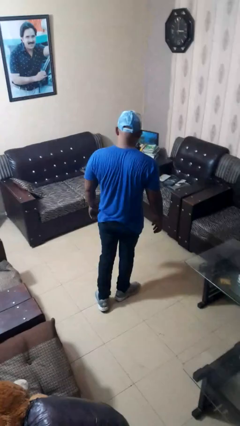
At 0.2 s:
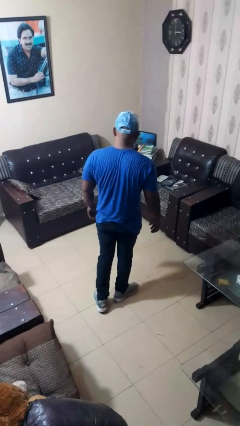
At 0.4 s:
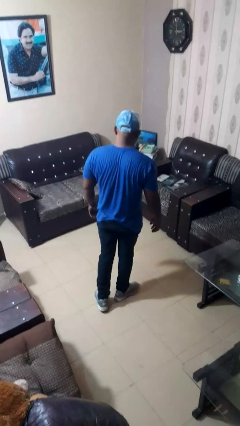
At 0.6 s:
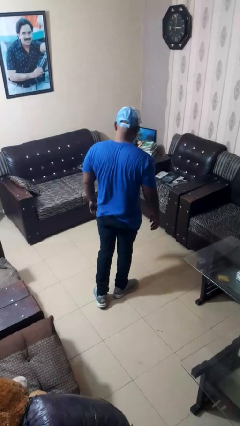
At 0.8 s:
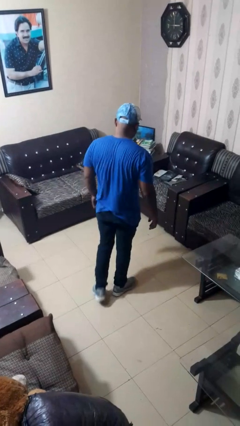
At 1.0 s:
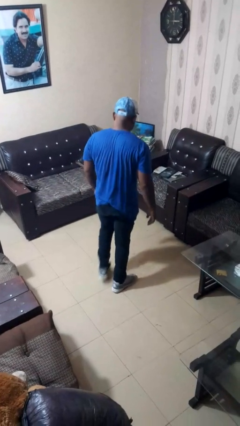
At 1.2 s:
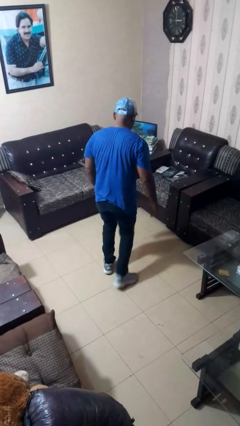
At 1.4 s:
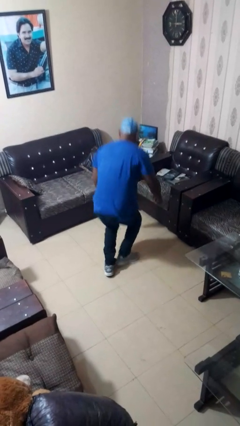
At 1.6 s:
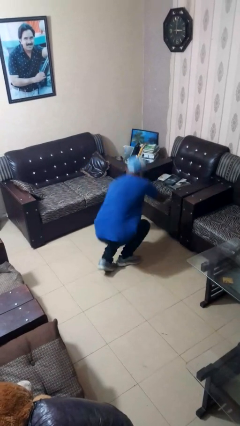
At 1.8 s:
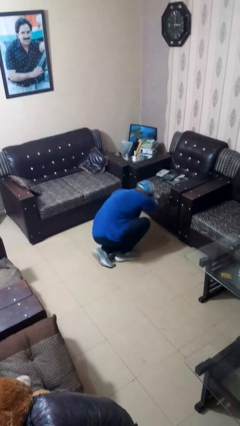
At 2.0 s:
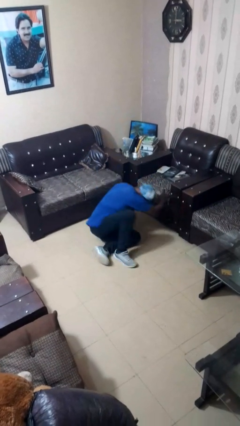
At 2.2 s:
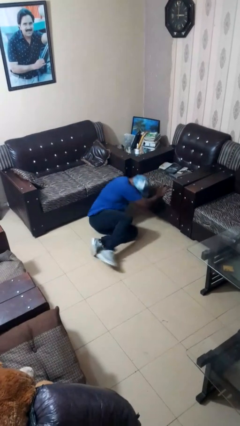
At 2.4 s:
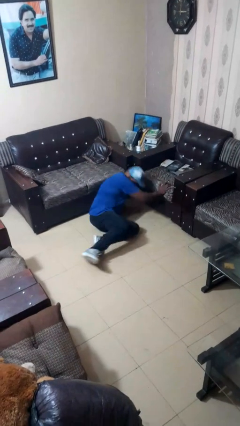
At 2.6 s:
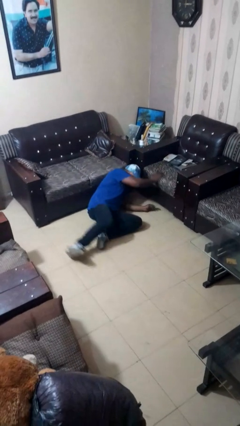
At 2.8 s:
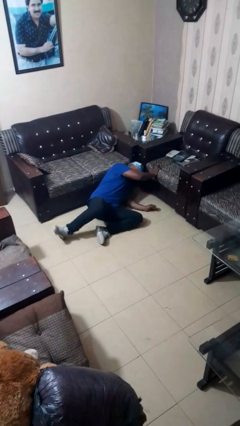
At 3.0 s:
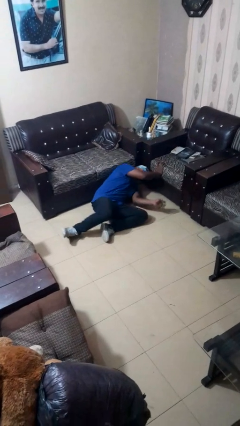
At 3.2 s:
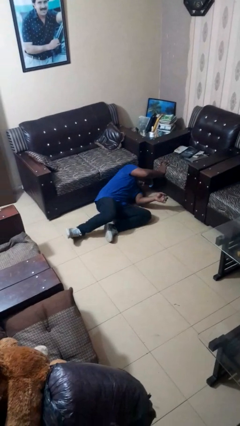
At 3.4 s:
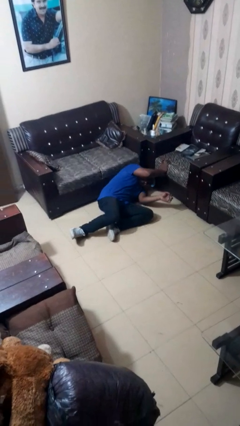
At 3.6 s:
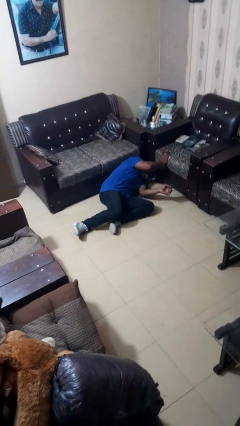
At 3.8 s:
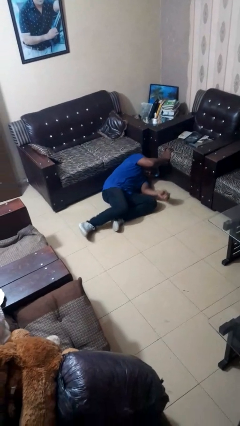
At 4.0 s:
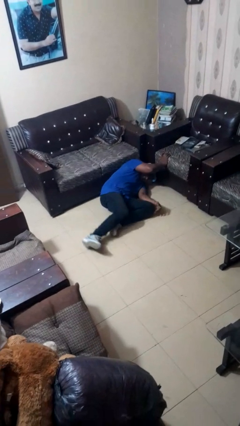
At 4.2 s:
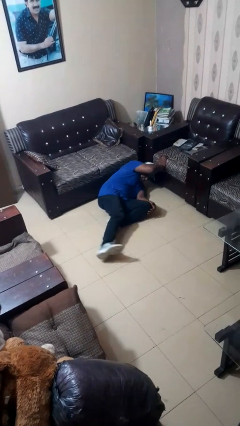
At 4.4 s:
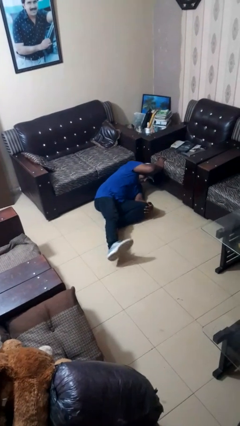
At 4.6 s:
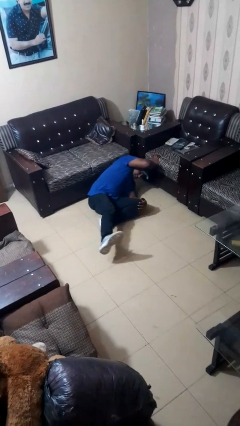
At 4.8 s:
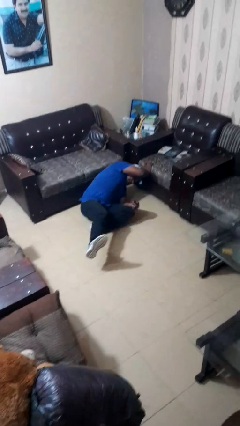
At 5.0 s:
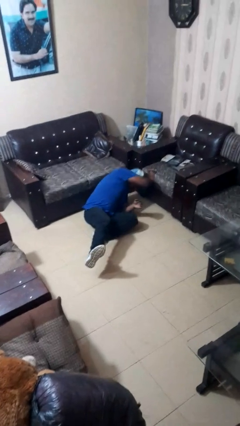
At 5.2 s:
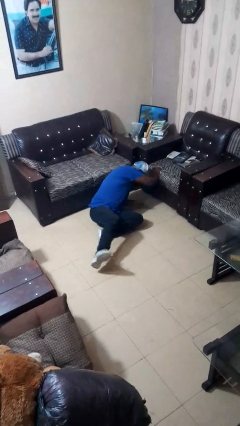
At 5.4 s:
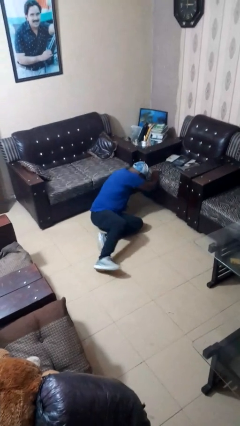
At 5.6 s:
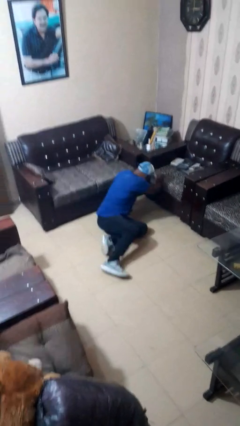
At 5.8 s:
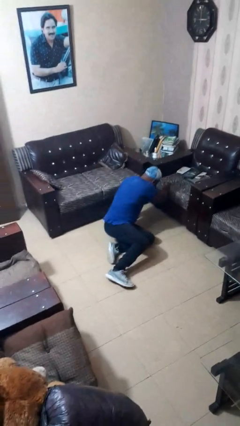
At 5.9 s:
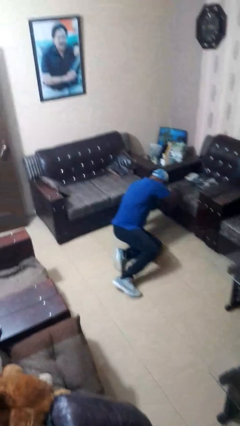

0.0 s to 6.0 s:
person trips on object on floor

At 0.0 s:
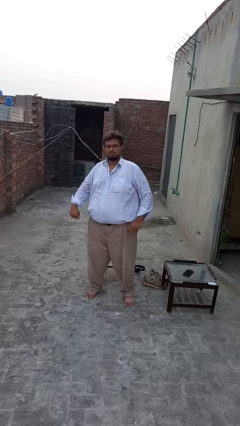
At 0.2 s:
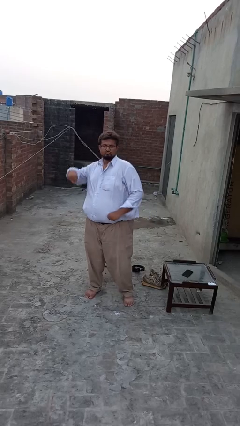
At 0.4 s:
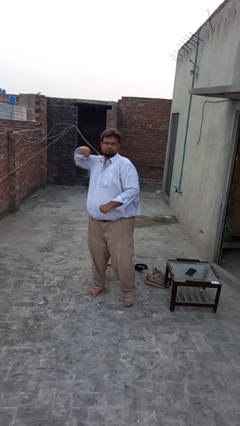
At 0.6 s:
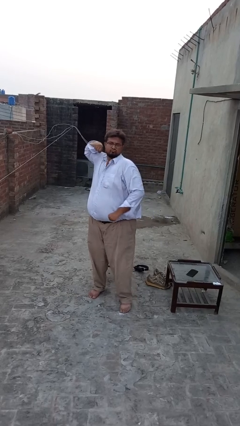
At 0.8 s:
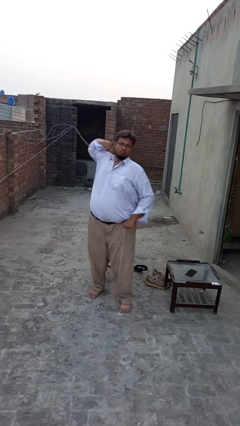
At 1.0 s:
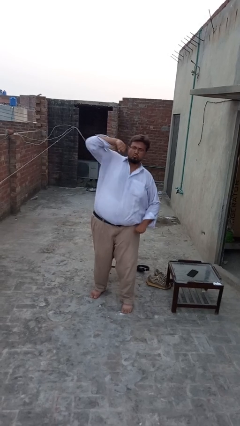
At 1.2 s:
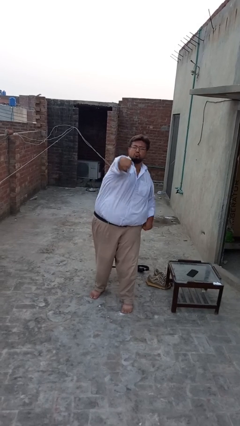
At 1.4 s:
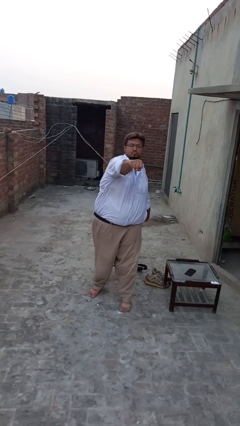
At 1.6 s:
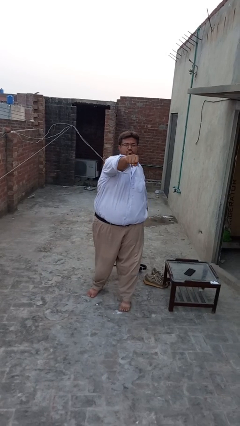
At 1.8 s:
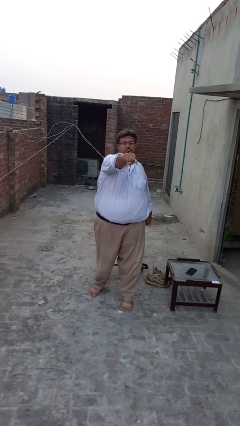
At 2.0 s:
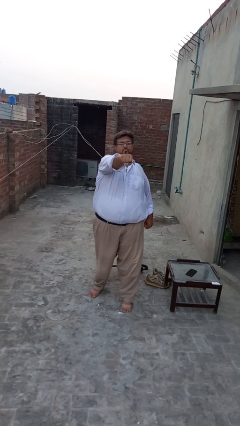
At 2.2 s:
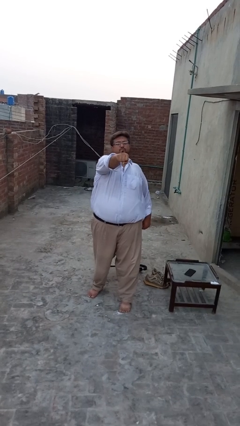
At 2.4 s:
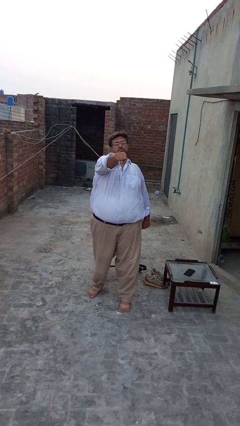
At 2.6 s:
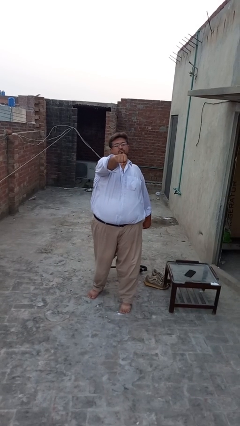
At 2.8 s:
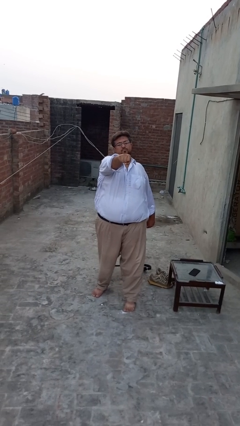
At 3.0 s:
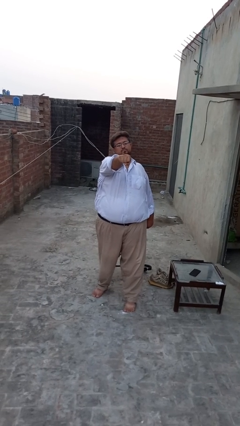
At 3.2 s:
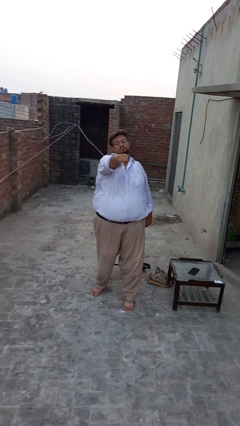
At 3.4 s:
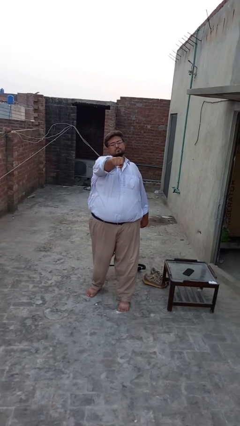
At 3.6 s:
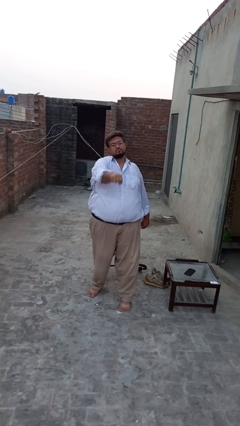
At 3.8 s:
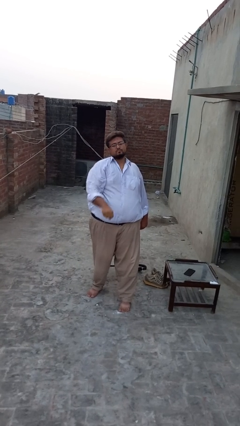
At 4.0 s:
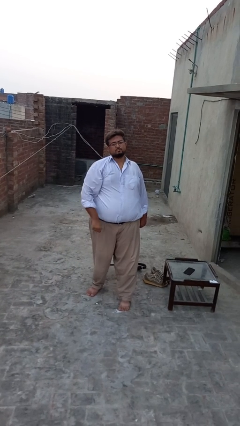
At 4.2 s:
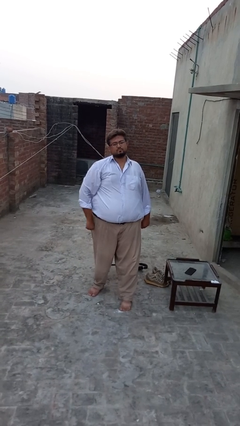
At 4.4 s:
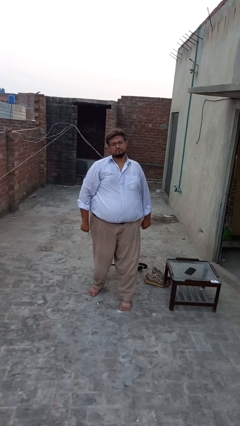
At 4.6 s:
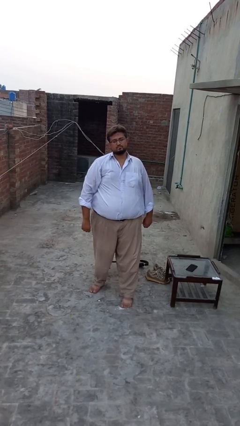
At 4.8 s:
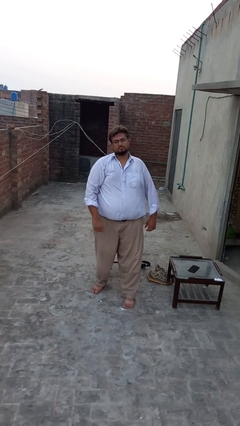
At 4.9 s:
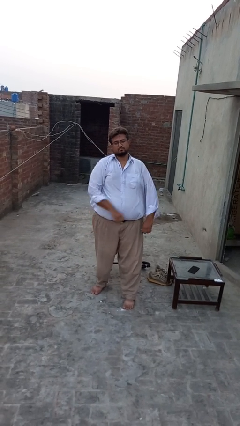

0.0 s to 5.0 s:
person punches

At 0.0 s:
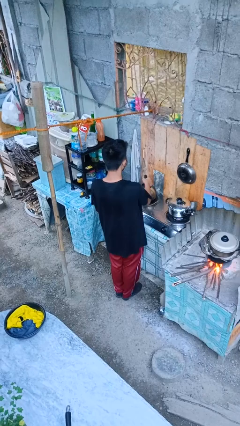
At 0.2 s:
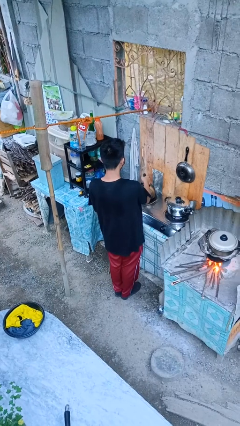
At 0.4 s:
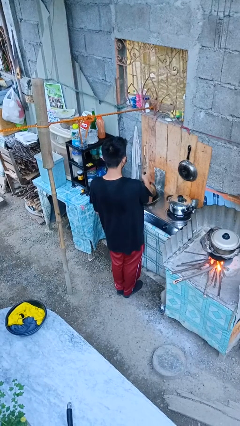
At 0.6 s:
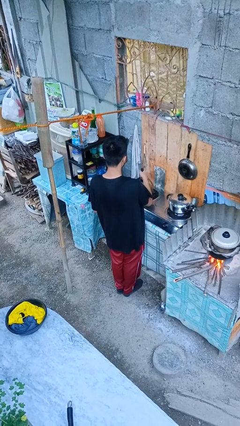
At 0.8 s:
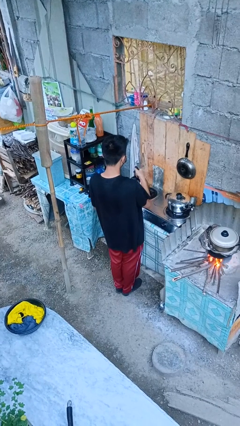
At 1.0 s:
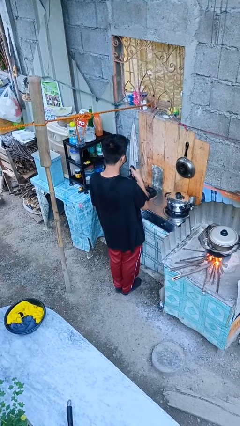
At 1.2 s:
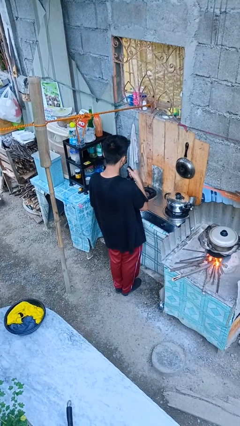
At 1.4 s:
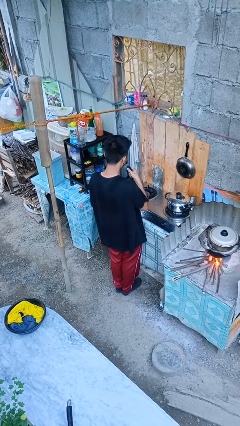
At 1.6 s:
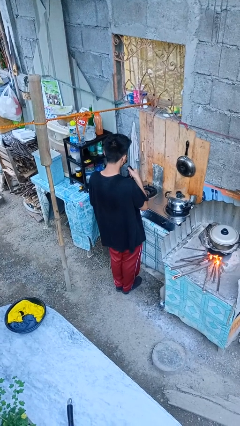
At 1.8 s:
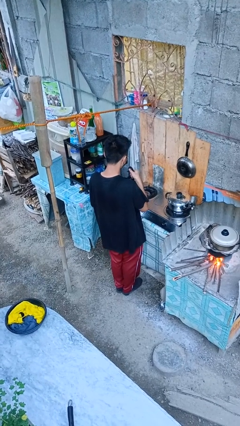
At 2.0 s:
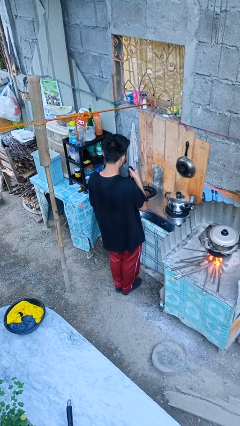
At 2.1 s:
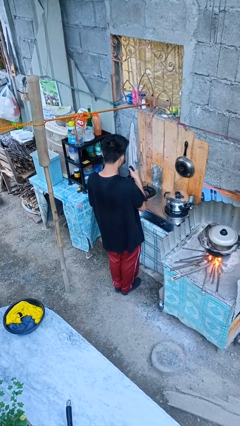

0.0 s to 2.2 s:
person picks up object from countertop

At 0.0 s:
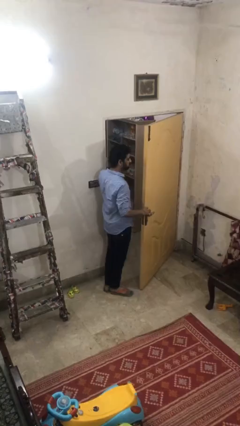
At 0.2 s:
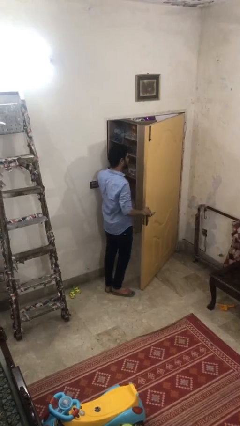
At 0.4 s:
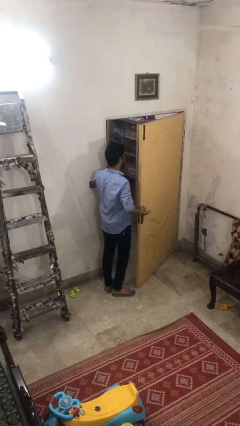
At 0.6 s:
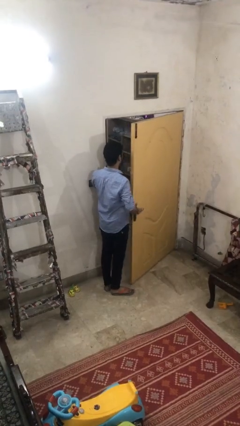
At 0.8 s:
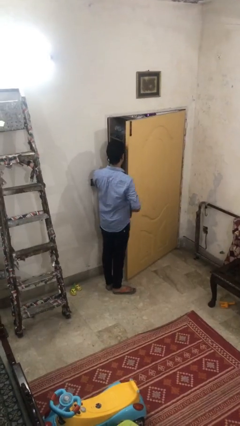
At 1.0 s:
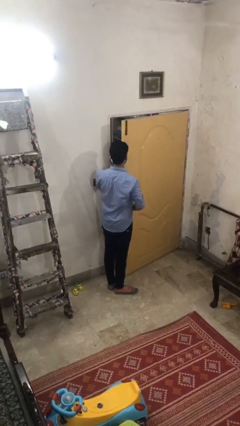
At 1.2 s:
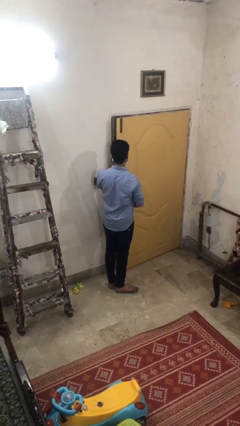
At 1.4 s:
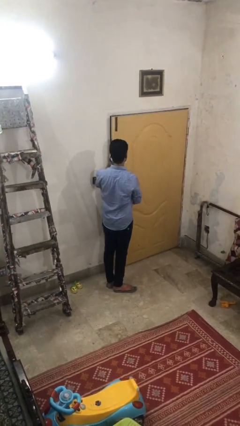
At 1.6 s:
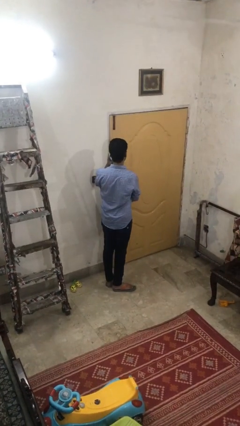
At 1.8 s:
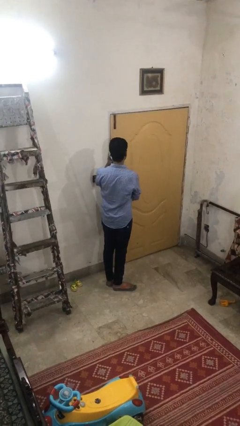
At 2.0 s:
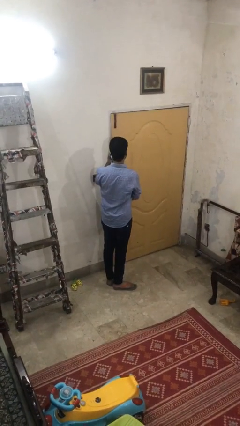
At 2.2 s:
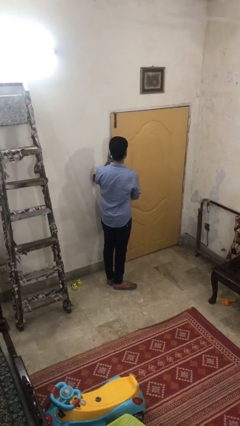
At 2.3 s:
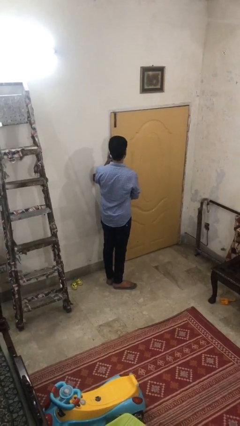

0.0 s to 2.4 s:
person closes facility door

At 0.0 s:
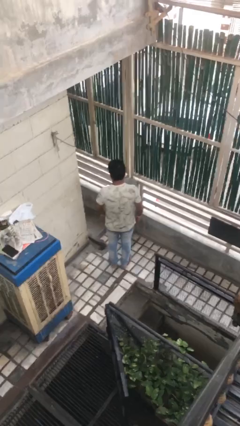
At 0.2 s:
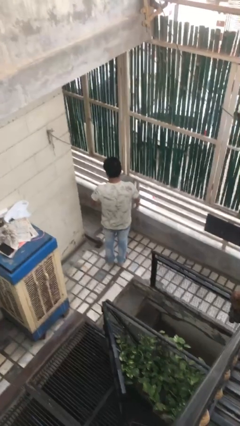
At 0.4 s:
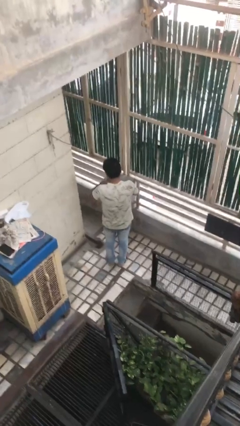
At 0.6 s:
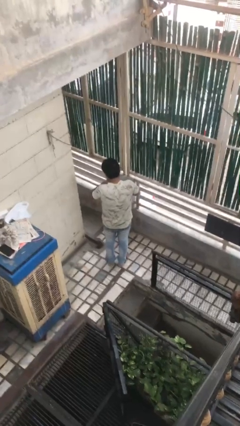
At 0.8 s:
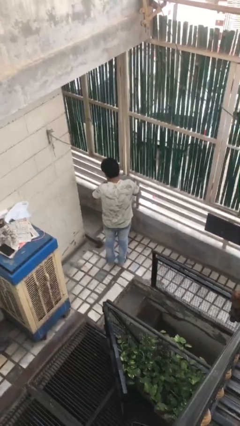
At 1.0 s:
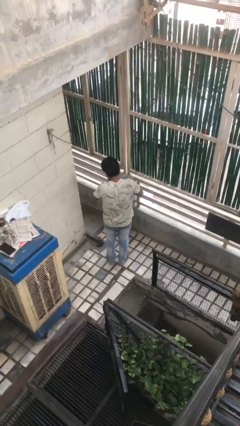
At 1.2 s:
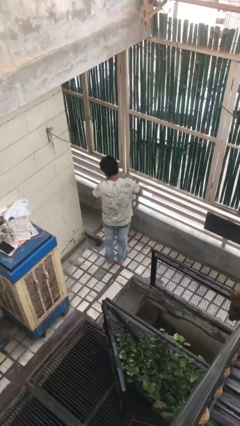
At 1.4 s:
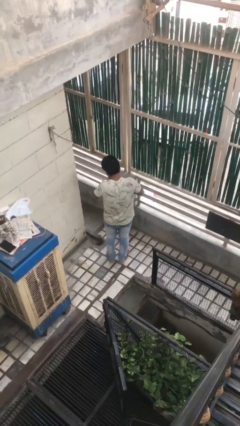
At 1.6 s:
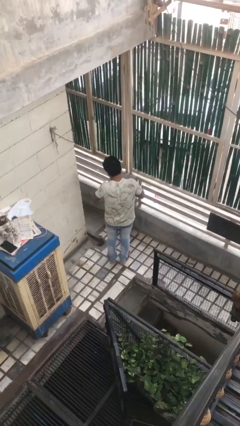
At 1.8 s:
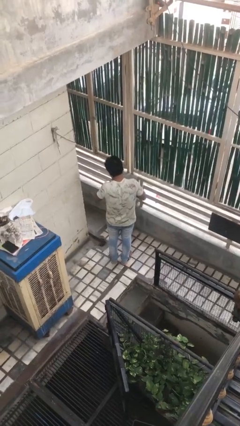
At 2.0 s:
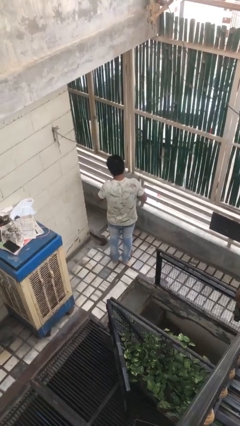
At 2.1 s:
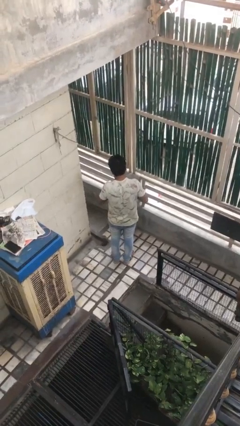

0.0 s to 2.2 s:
person swats bug
